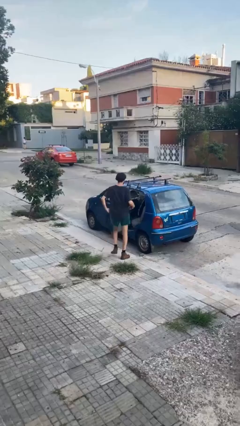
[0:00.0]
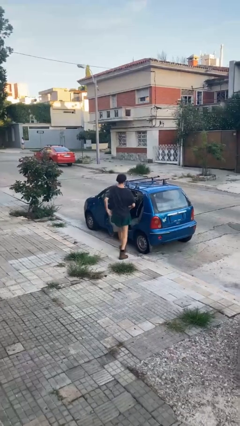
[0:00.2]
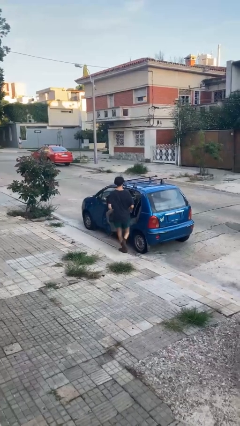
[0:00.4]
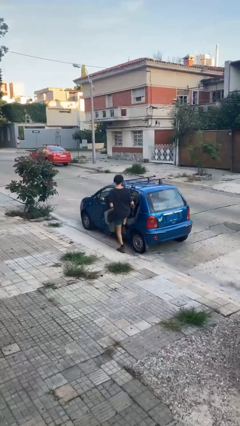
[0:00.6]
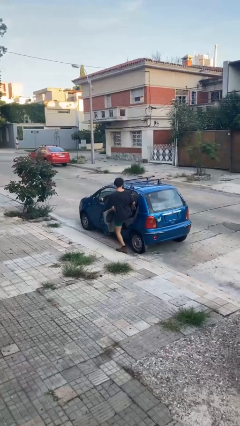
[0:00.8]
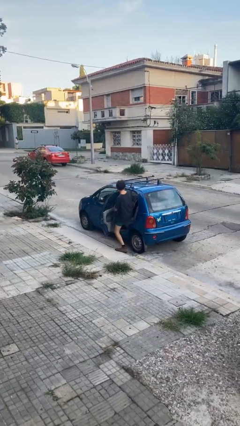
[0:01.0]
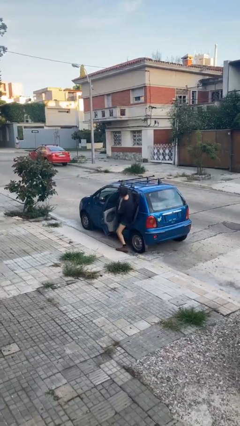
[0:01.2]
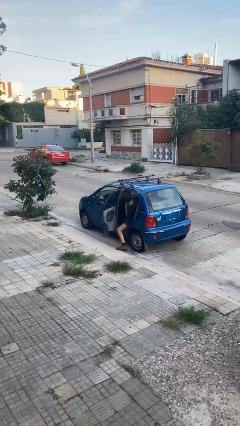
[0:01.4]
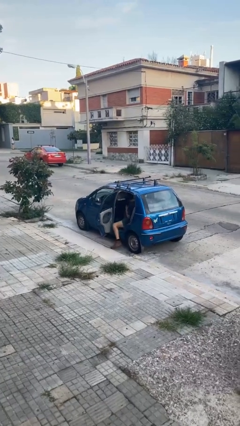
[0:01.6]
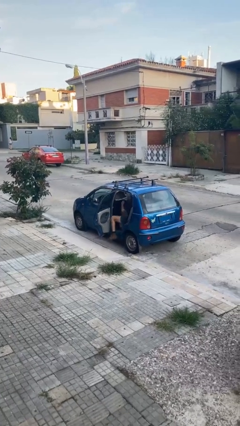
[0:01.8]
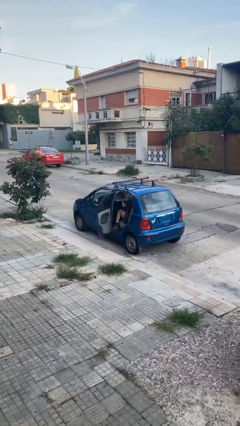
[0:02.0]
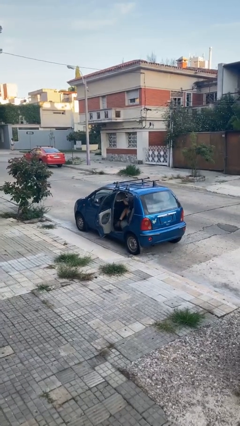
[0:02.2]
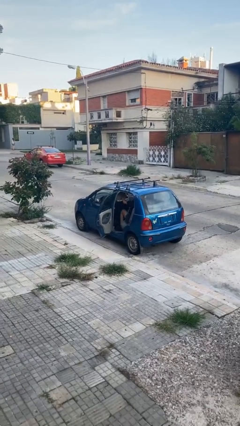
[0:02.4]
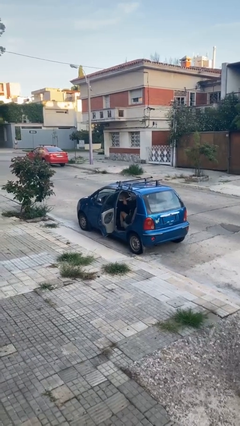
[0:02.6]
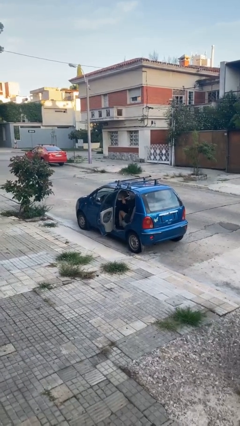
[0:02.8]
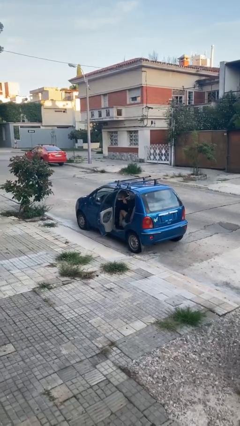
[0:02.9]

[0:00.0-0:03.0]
person enters car

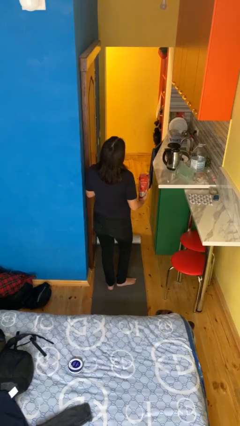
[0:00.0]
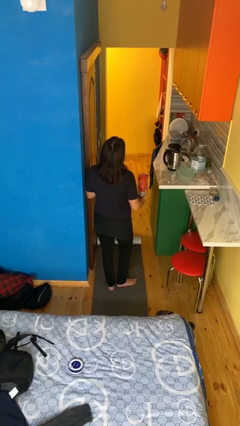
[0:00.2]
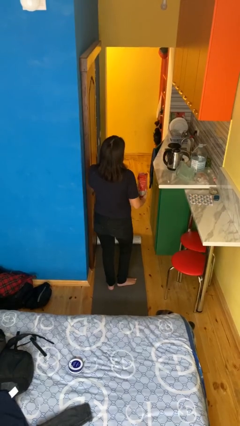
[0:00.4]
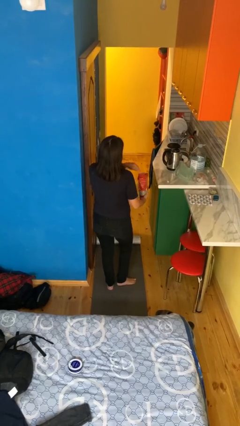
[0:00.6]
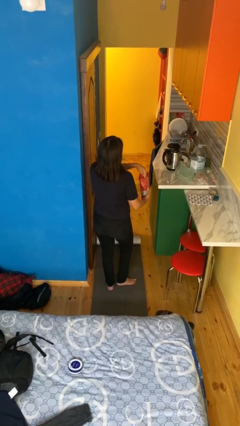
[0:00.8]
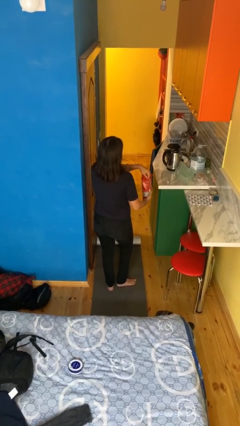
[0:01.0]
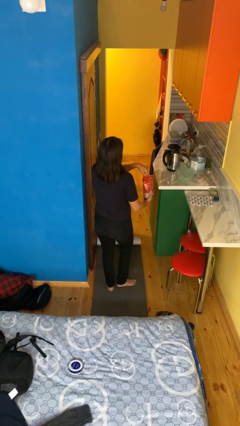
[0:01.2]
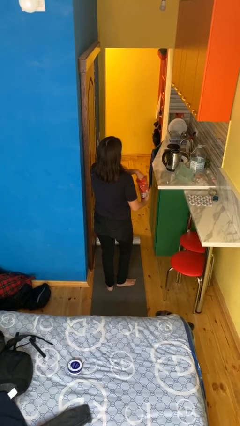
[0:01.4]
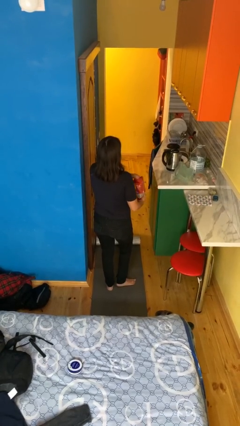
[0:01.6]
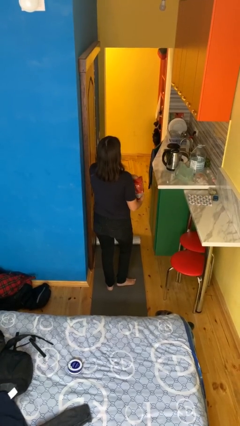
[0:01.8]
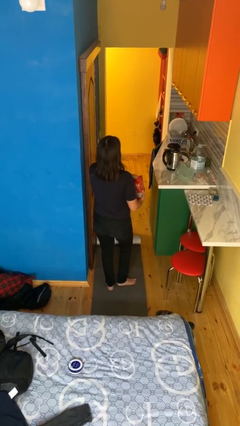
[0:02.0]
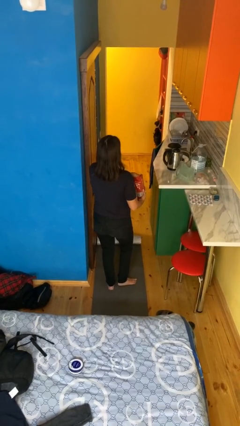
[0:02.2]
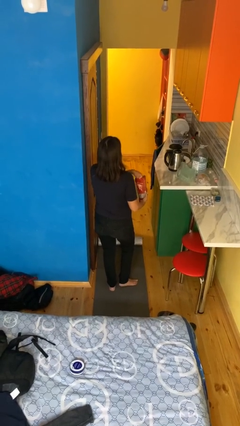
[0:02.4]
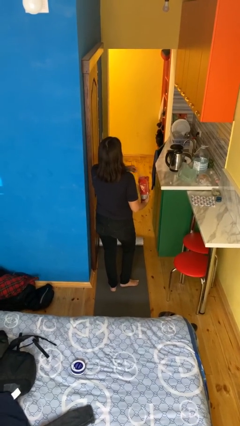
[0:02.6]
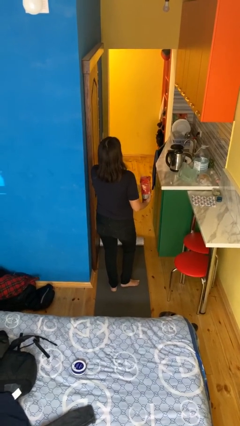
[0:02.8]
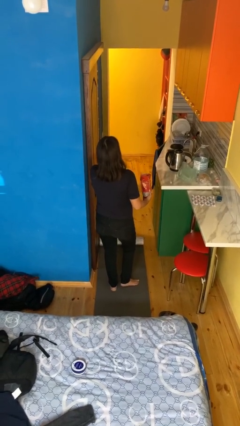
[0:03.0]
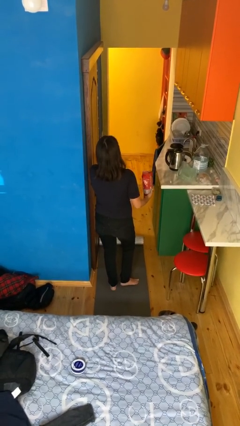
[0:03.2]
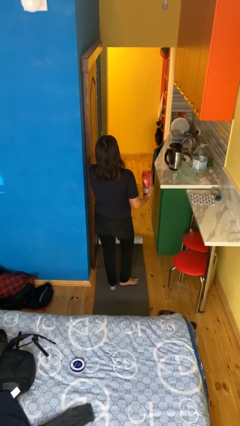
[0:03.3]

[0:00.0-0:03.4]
person eats snack from bag

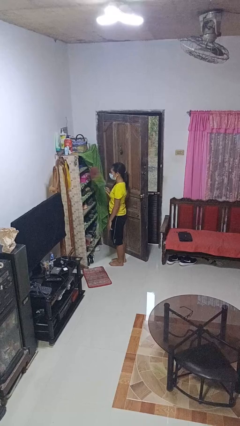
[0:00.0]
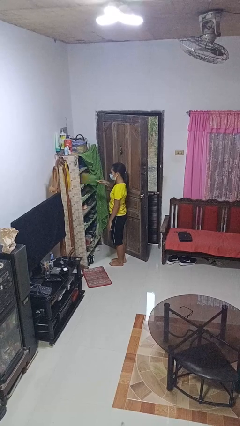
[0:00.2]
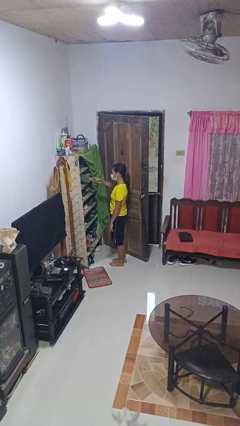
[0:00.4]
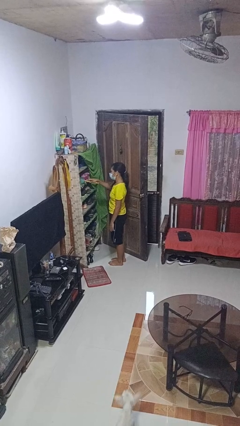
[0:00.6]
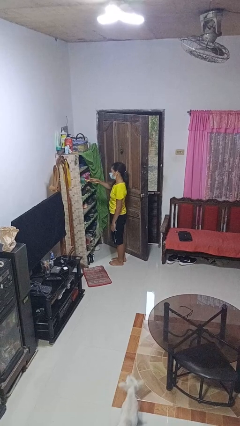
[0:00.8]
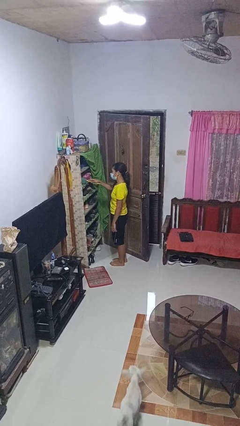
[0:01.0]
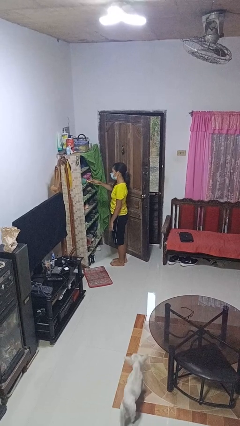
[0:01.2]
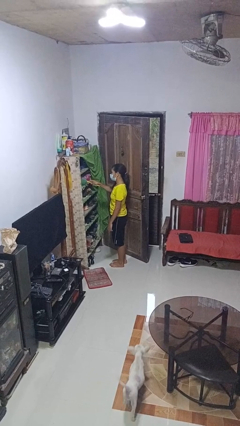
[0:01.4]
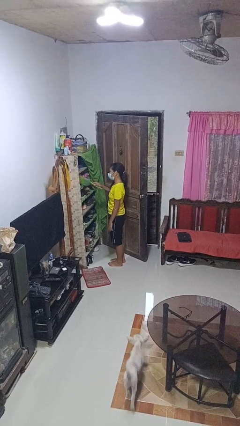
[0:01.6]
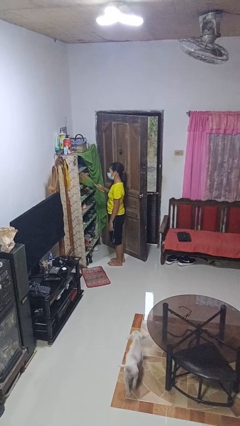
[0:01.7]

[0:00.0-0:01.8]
person dusts furniture

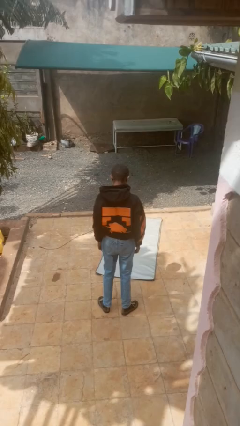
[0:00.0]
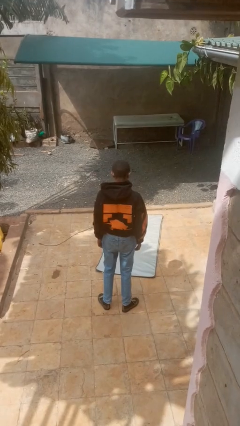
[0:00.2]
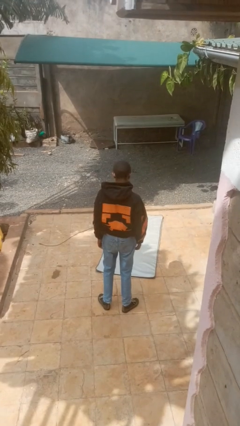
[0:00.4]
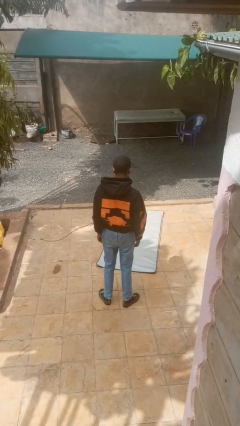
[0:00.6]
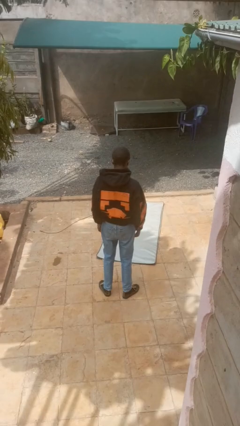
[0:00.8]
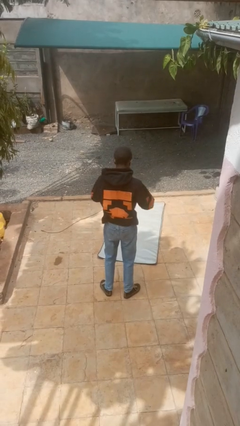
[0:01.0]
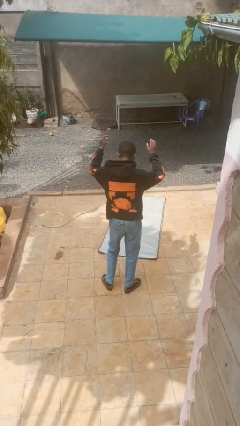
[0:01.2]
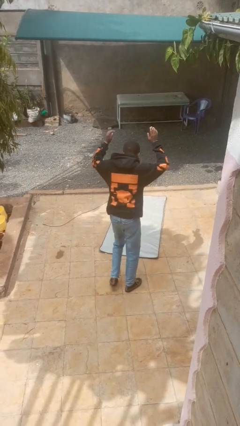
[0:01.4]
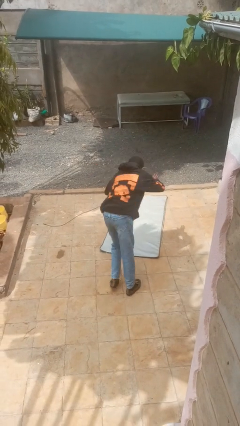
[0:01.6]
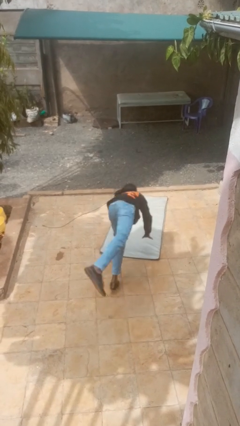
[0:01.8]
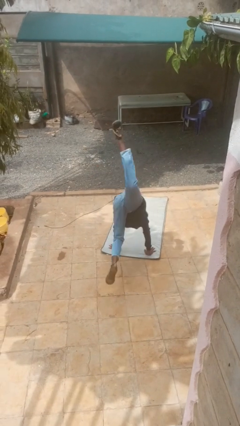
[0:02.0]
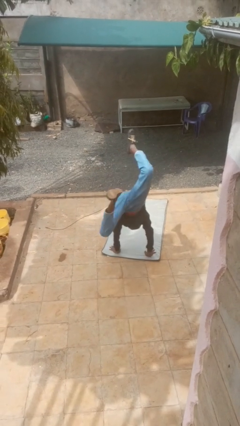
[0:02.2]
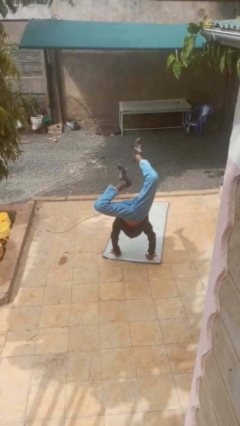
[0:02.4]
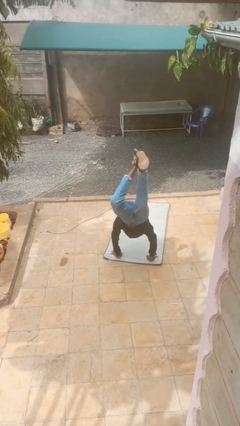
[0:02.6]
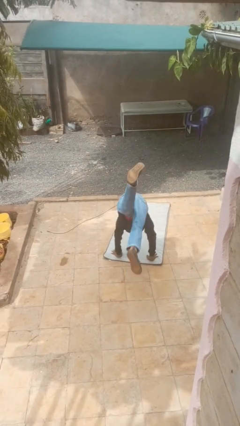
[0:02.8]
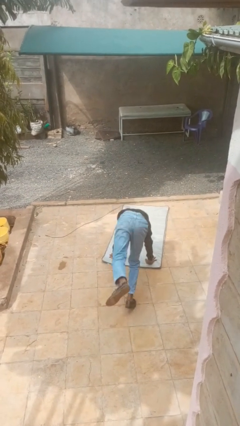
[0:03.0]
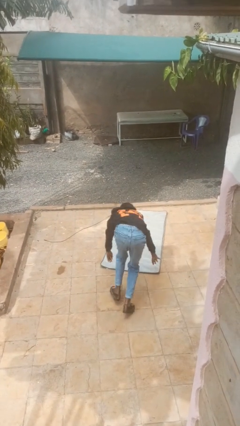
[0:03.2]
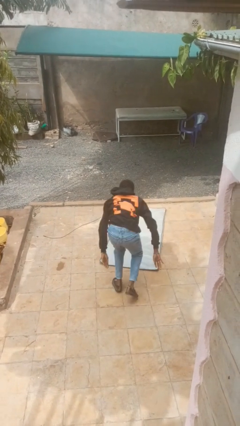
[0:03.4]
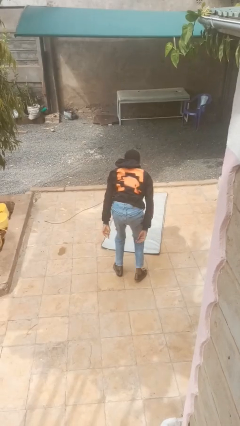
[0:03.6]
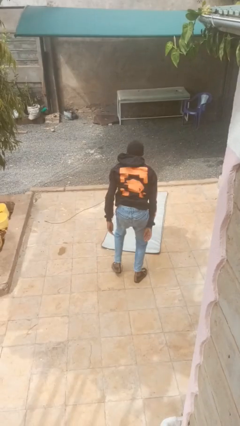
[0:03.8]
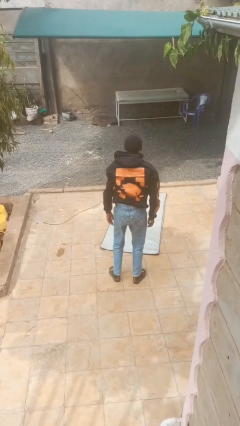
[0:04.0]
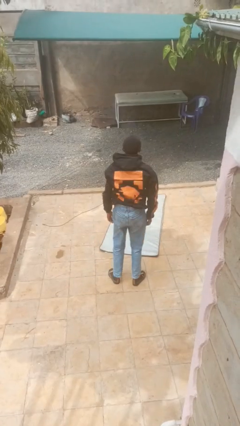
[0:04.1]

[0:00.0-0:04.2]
person handstand

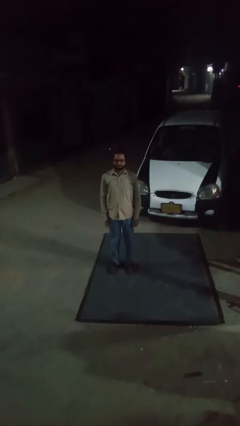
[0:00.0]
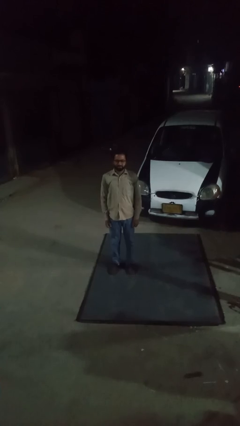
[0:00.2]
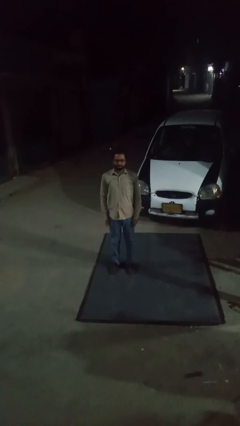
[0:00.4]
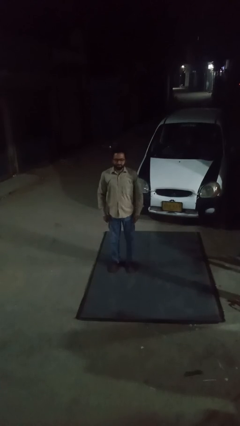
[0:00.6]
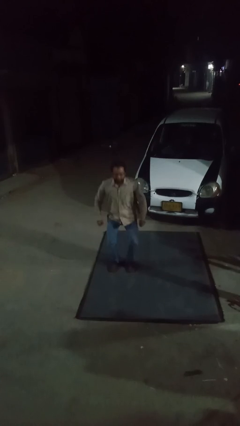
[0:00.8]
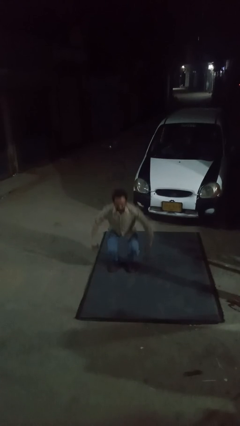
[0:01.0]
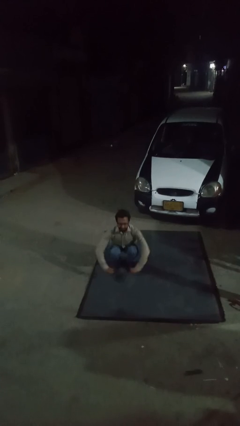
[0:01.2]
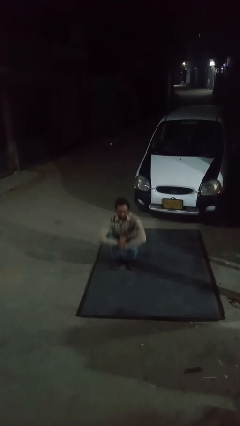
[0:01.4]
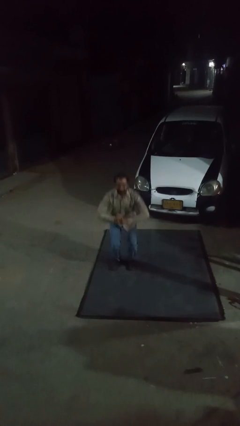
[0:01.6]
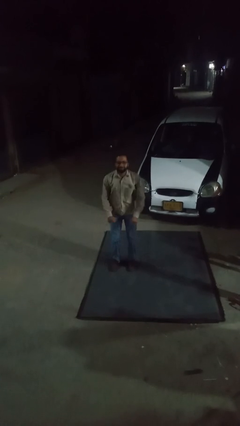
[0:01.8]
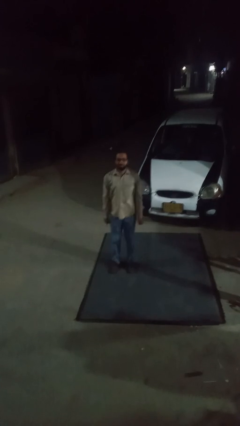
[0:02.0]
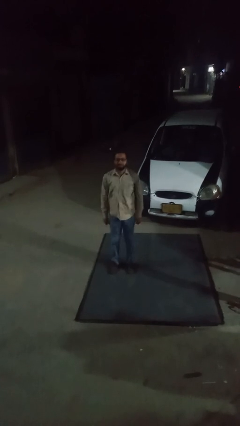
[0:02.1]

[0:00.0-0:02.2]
person exercises with situp

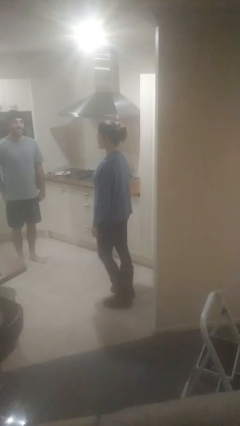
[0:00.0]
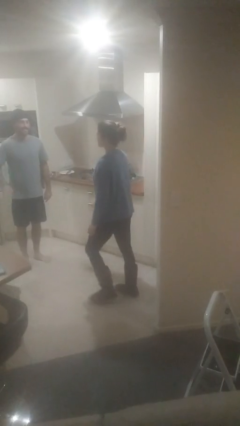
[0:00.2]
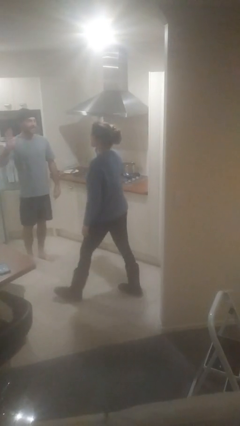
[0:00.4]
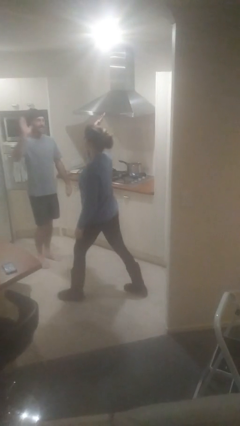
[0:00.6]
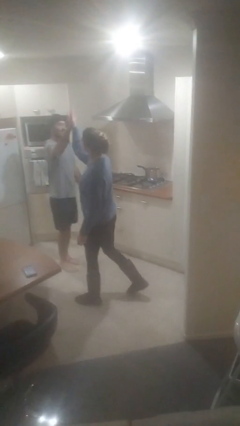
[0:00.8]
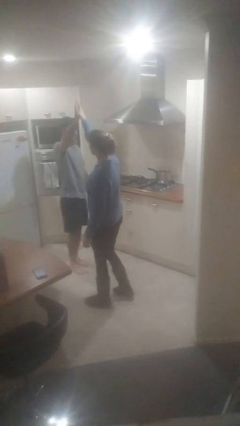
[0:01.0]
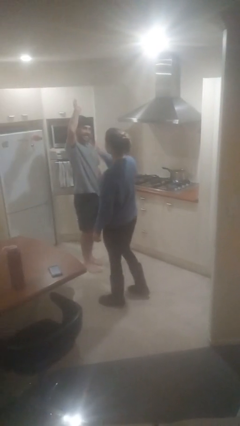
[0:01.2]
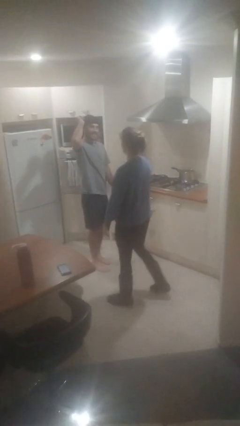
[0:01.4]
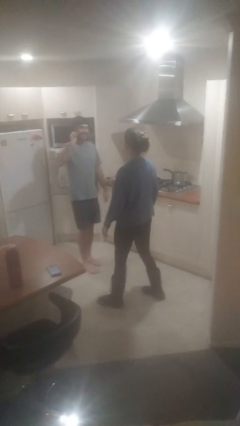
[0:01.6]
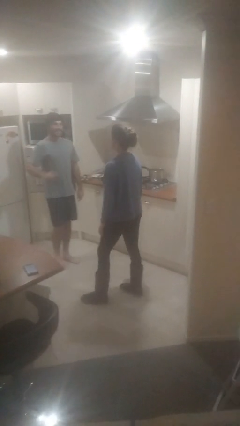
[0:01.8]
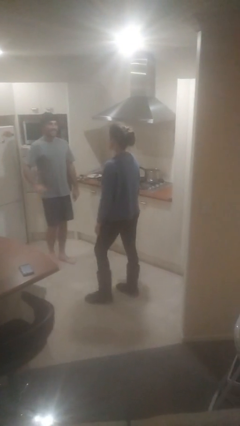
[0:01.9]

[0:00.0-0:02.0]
person highfives hand

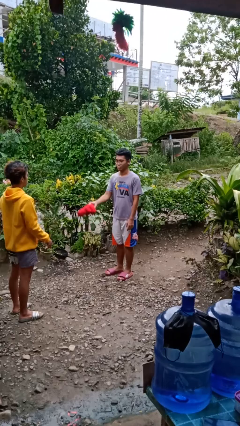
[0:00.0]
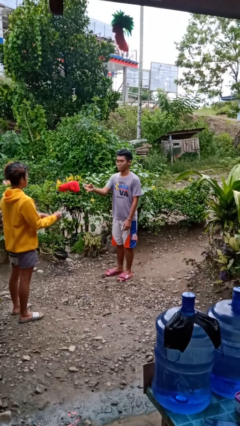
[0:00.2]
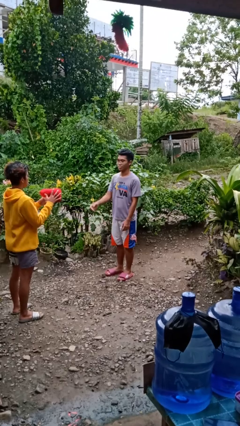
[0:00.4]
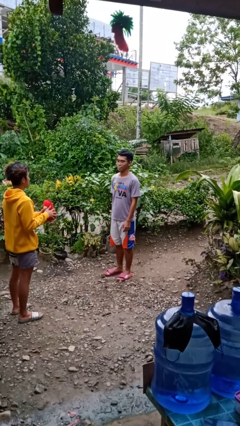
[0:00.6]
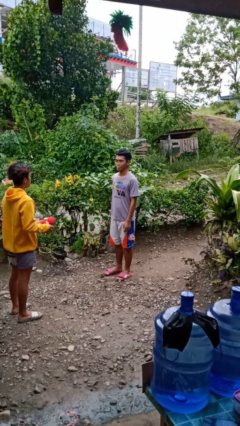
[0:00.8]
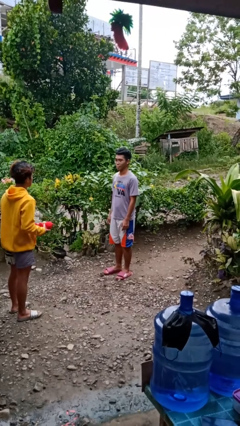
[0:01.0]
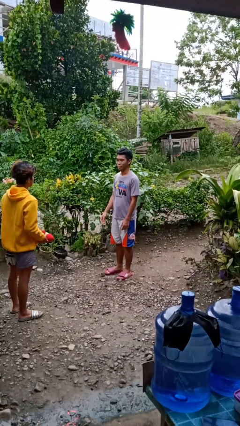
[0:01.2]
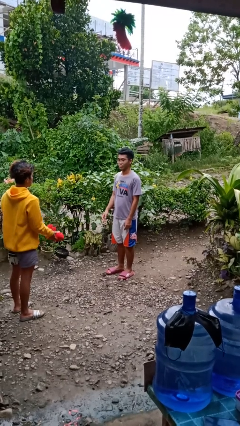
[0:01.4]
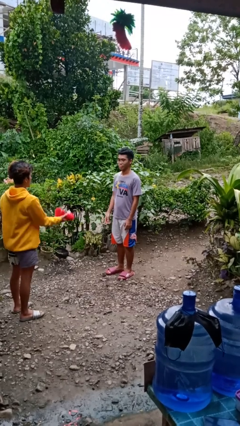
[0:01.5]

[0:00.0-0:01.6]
person throws object to person
